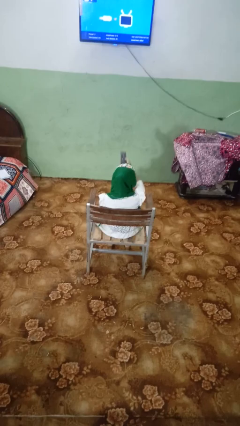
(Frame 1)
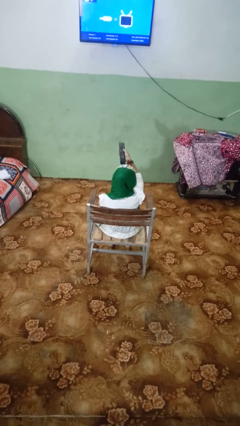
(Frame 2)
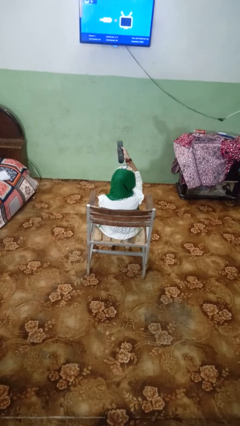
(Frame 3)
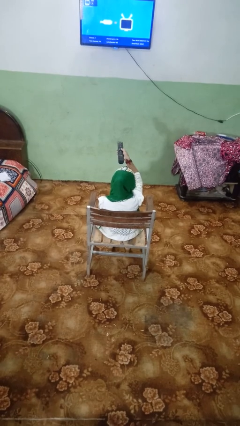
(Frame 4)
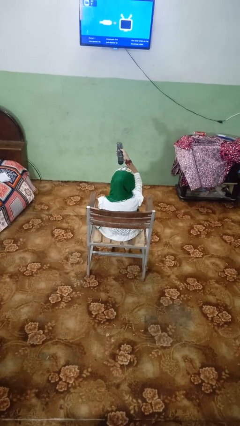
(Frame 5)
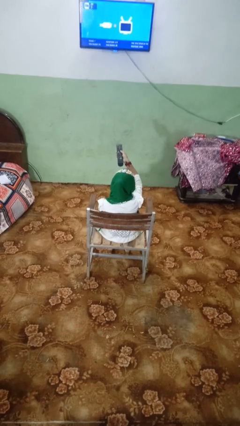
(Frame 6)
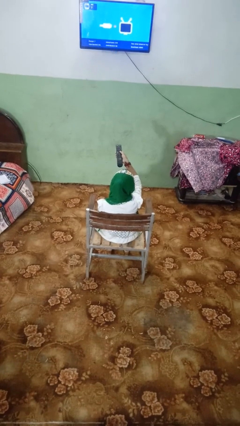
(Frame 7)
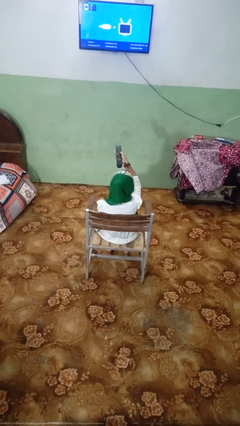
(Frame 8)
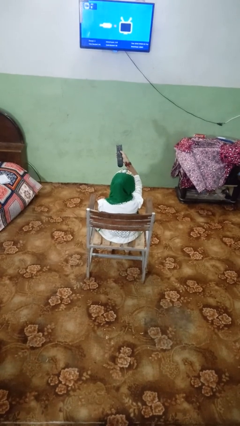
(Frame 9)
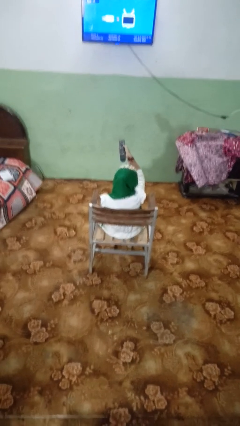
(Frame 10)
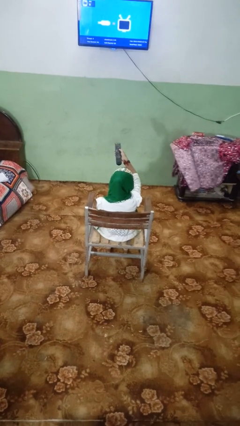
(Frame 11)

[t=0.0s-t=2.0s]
person uses television remote

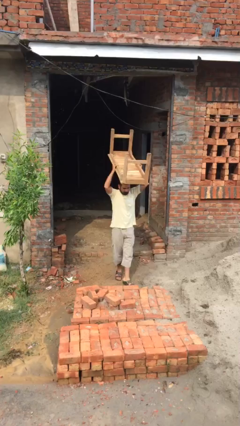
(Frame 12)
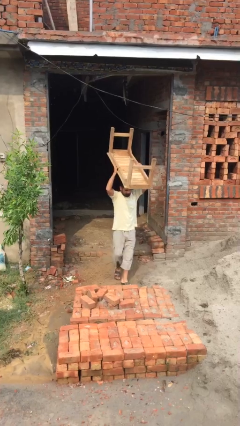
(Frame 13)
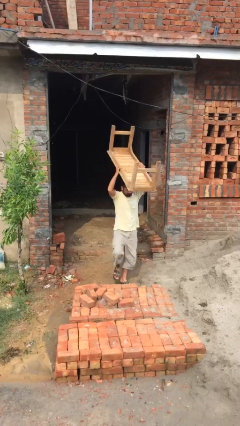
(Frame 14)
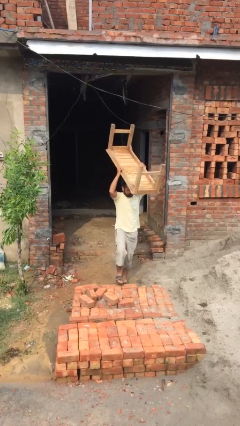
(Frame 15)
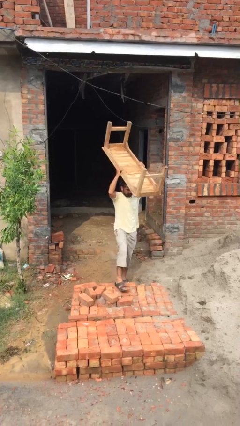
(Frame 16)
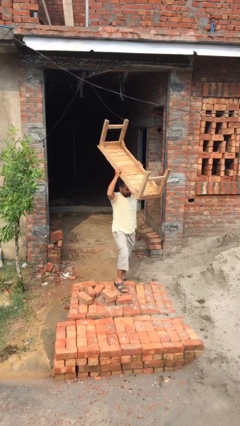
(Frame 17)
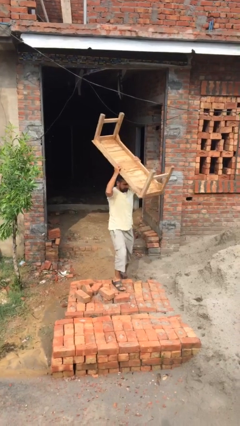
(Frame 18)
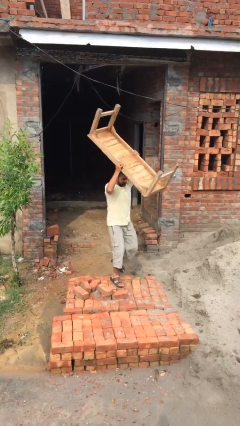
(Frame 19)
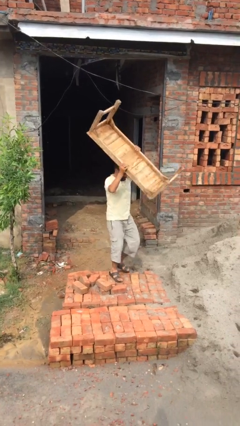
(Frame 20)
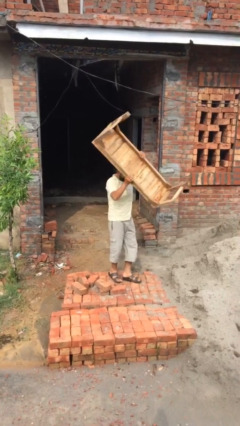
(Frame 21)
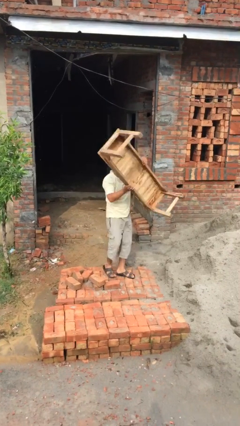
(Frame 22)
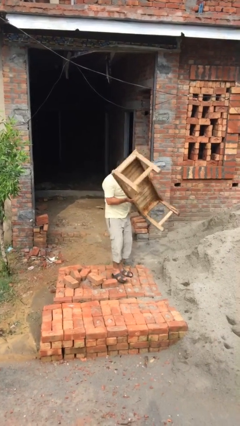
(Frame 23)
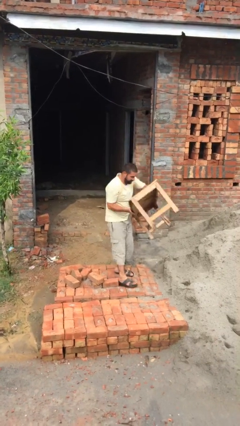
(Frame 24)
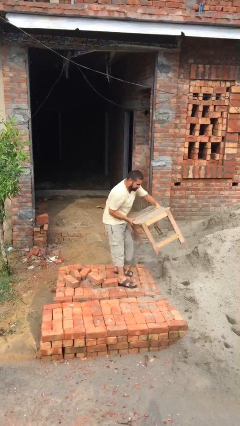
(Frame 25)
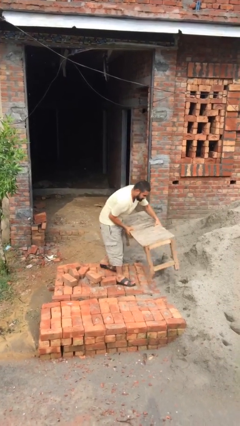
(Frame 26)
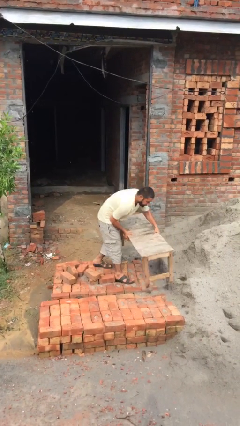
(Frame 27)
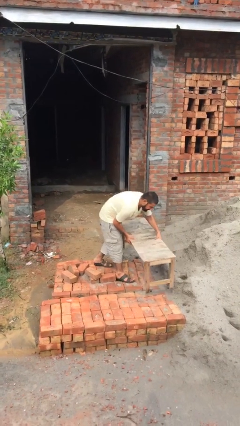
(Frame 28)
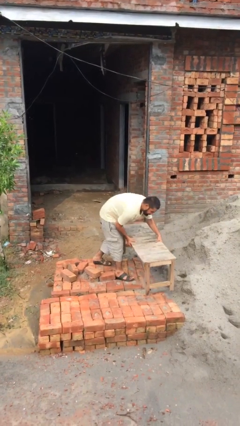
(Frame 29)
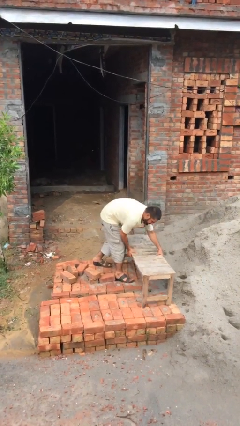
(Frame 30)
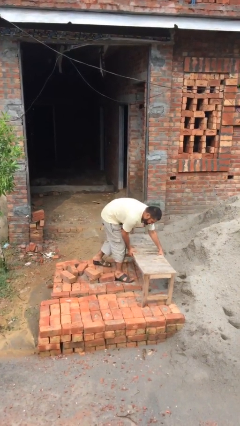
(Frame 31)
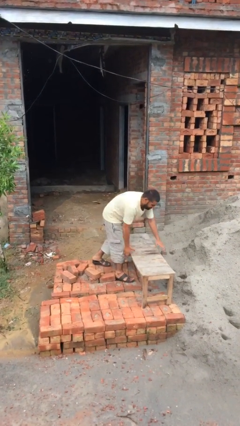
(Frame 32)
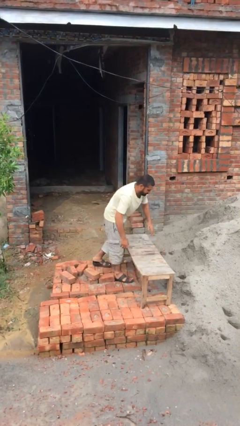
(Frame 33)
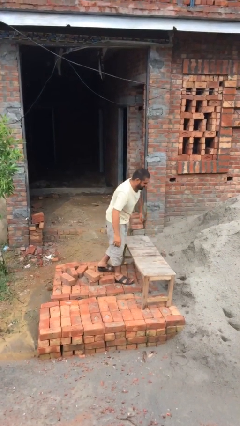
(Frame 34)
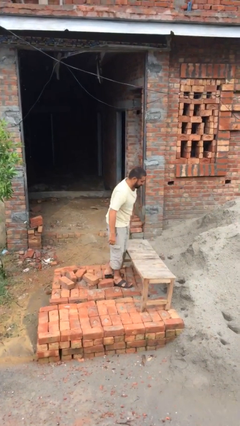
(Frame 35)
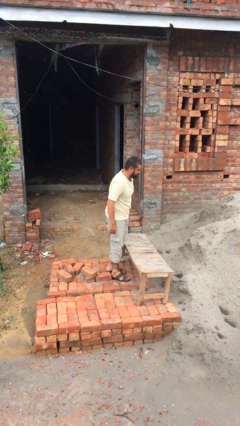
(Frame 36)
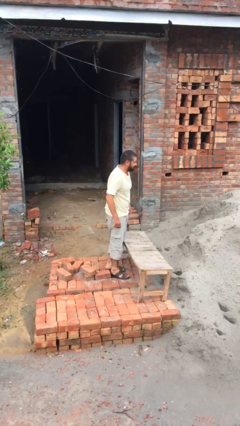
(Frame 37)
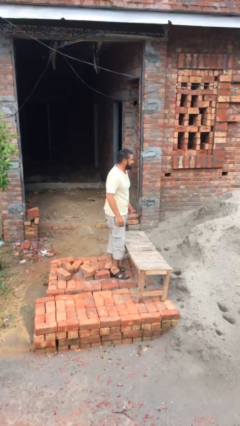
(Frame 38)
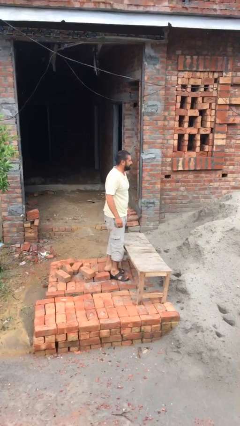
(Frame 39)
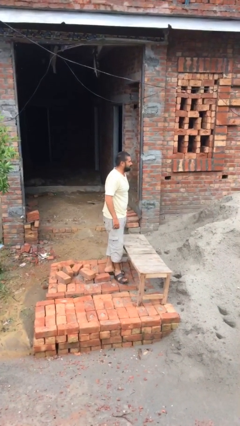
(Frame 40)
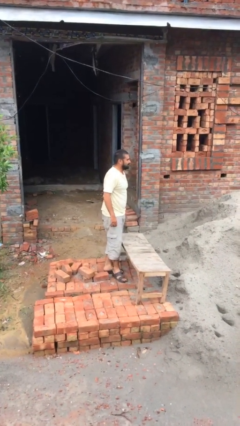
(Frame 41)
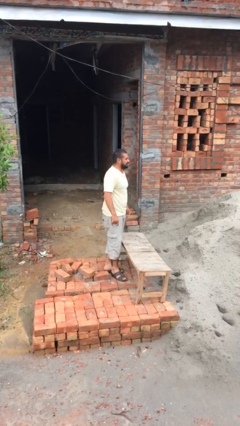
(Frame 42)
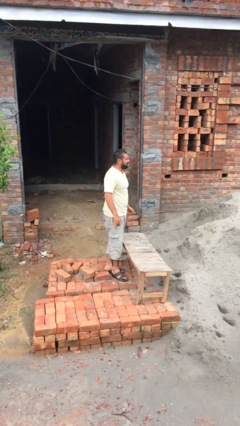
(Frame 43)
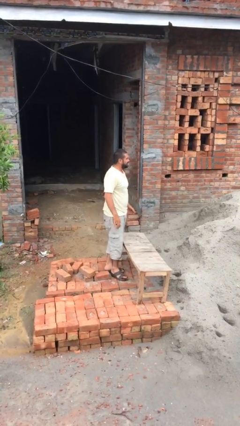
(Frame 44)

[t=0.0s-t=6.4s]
person puts down object on floor

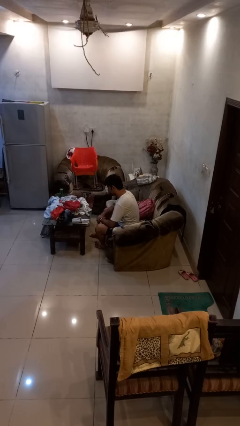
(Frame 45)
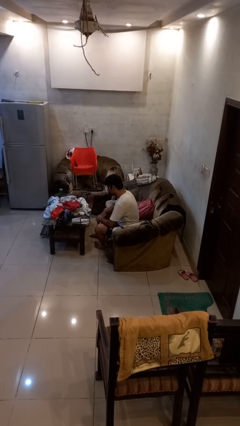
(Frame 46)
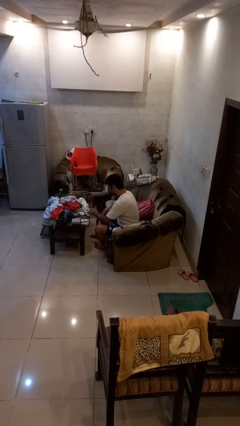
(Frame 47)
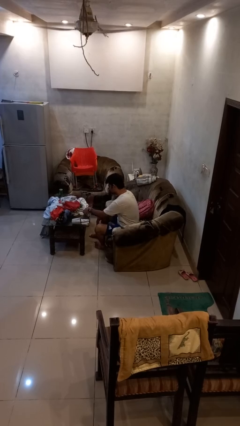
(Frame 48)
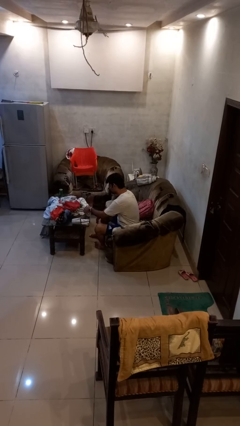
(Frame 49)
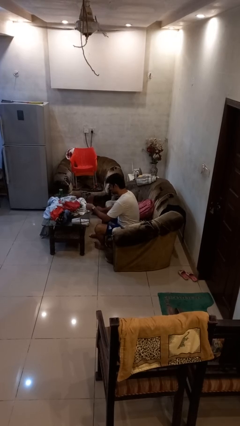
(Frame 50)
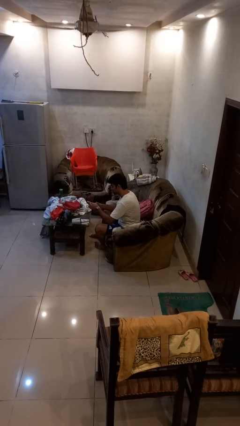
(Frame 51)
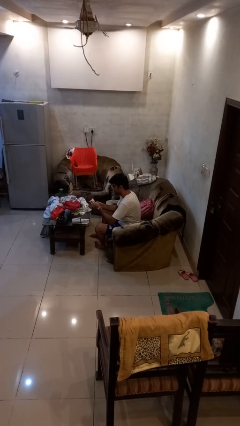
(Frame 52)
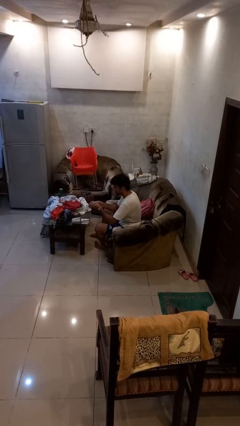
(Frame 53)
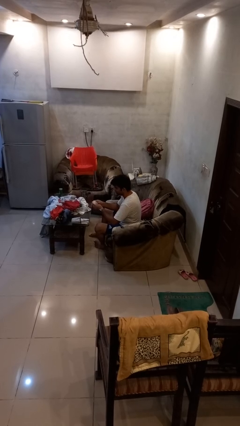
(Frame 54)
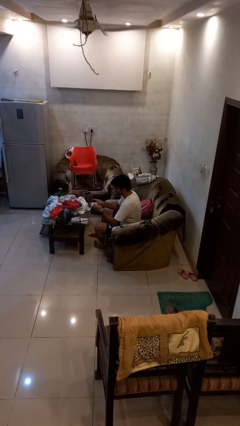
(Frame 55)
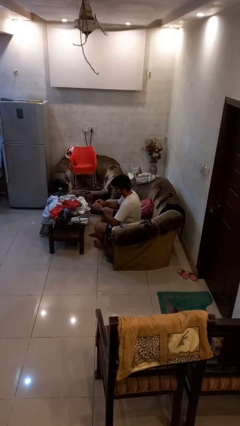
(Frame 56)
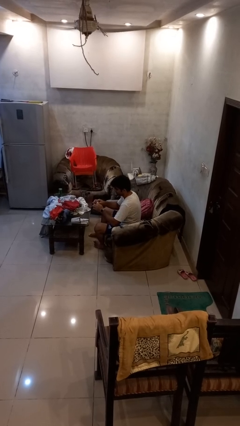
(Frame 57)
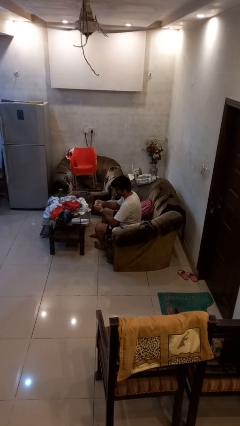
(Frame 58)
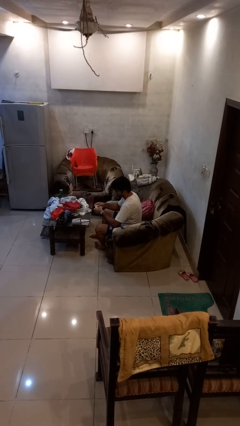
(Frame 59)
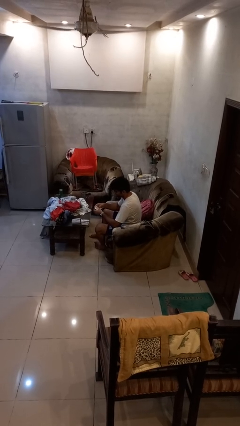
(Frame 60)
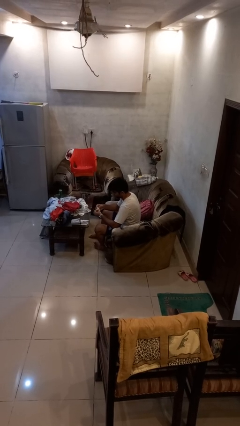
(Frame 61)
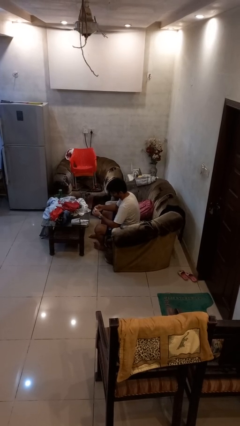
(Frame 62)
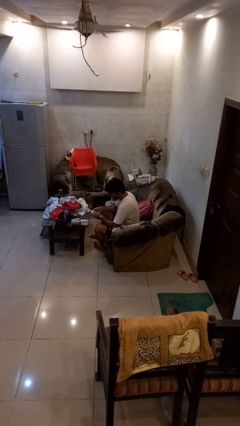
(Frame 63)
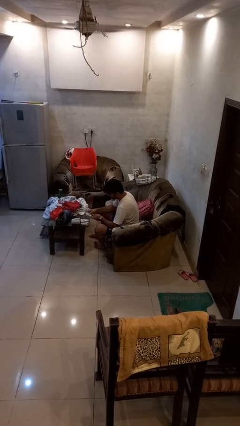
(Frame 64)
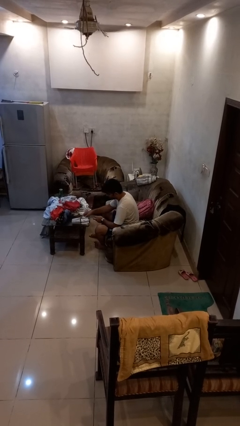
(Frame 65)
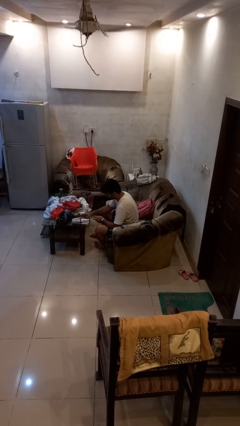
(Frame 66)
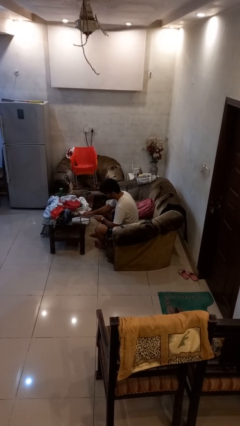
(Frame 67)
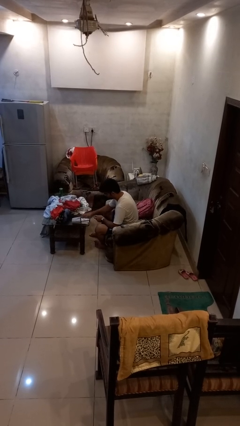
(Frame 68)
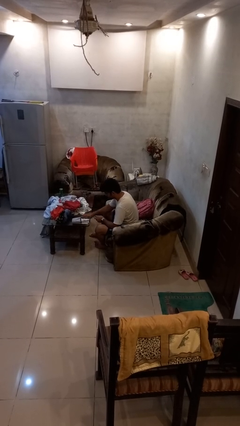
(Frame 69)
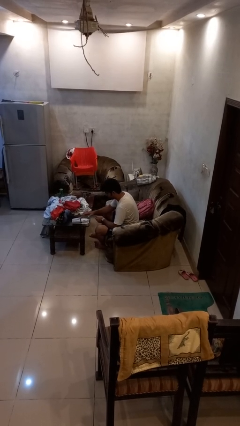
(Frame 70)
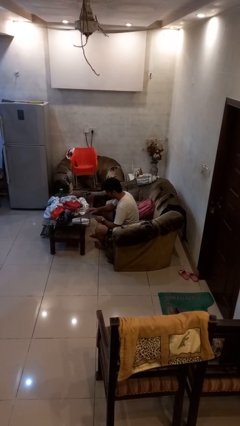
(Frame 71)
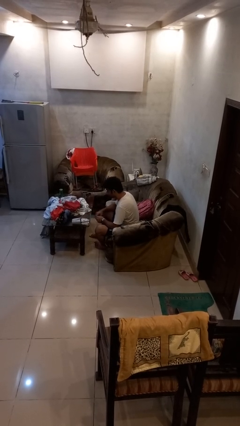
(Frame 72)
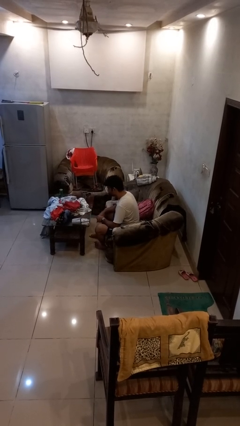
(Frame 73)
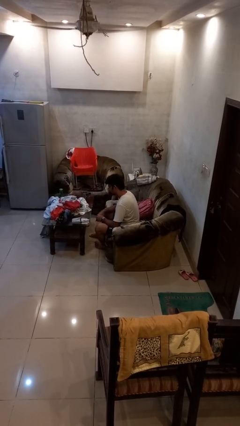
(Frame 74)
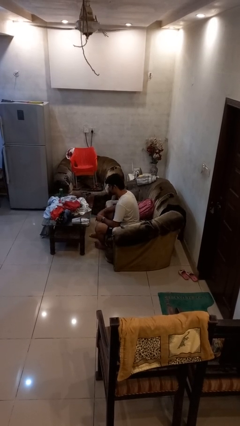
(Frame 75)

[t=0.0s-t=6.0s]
person folds socks

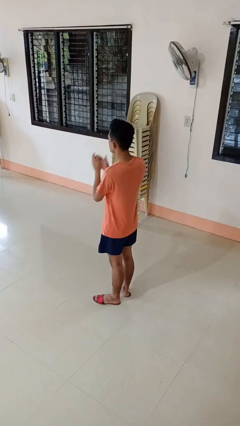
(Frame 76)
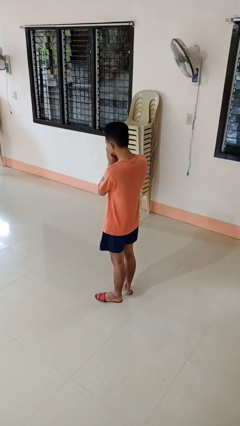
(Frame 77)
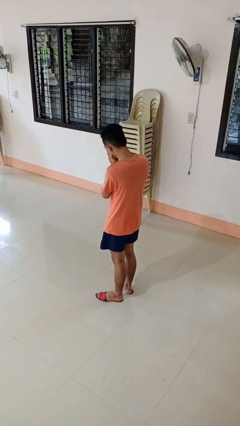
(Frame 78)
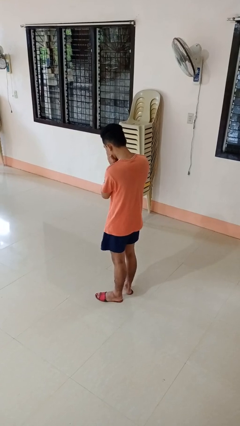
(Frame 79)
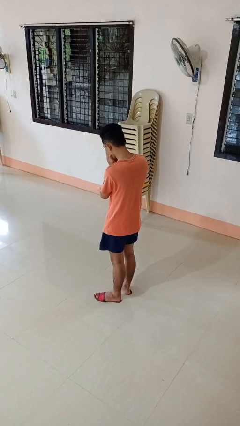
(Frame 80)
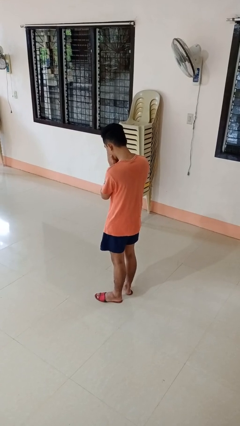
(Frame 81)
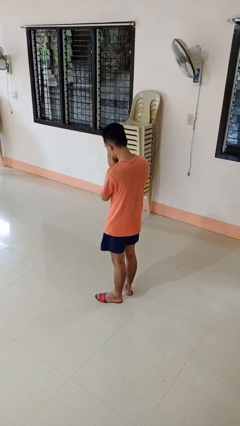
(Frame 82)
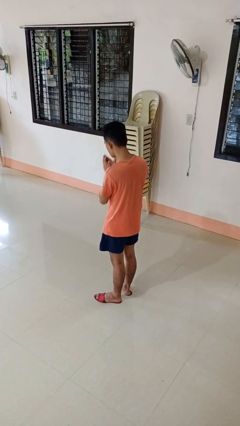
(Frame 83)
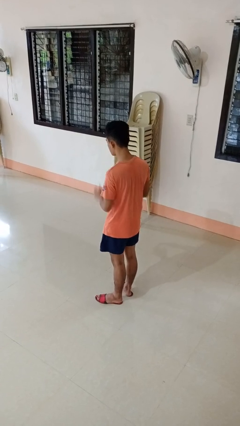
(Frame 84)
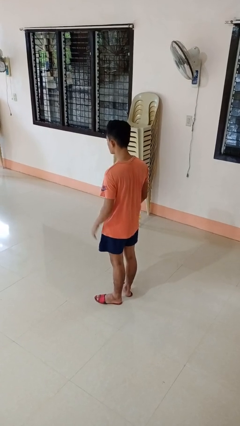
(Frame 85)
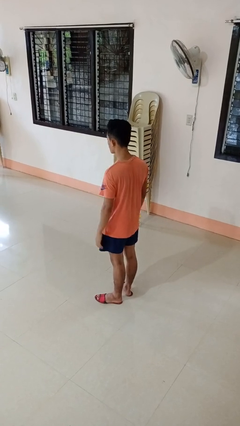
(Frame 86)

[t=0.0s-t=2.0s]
person sneezes into hand

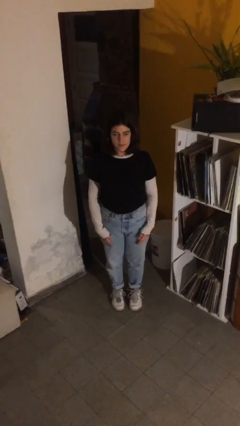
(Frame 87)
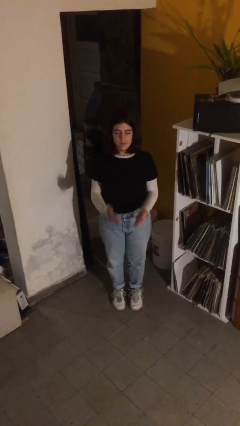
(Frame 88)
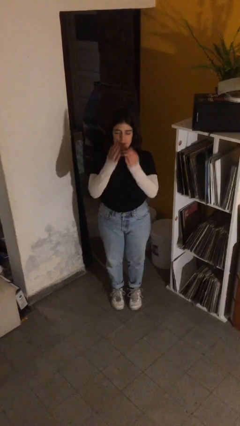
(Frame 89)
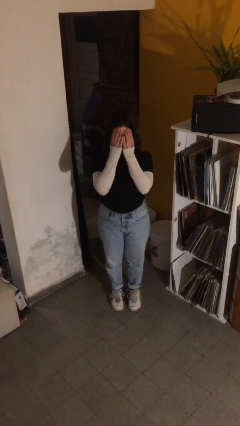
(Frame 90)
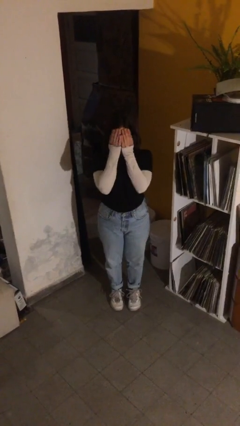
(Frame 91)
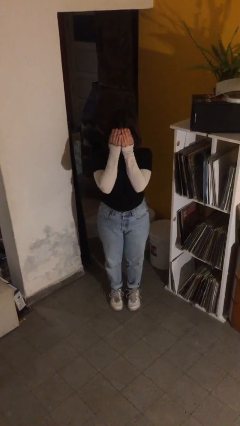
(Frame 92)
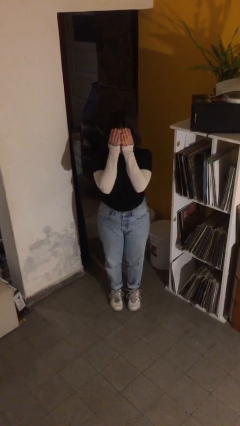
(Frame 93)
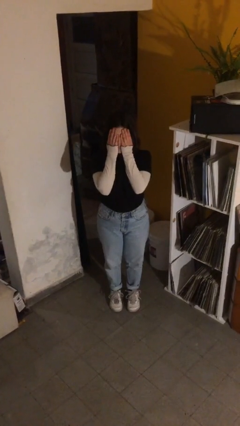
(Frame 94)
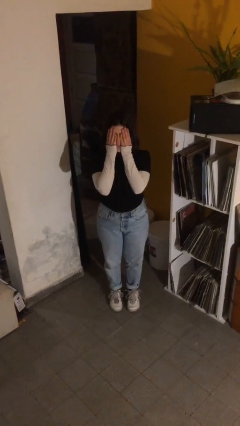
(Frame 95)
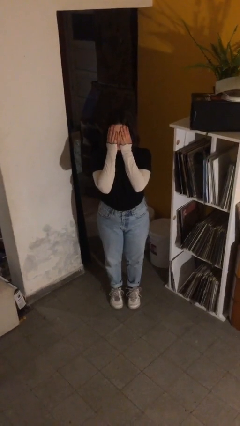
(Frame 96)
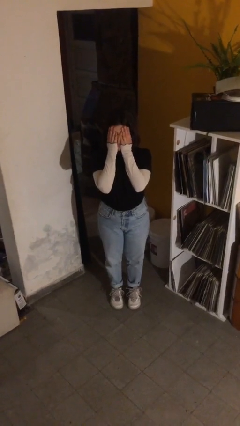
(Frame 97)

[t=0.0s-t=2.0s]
person covers face with hands
